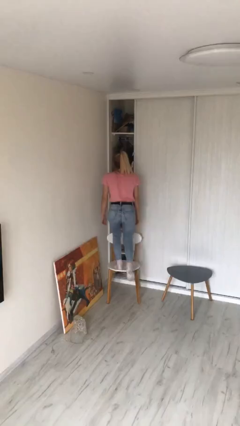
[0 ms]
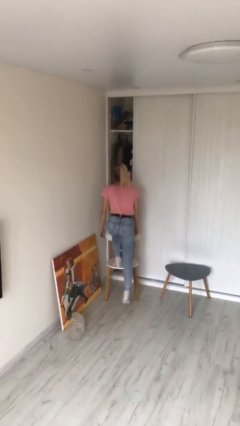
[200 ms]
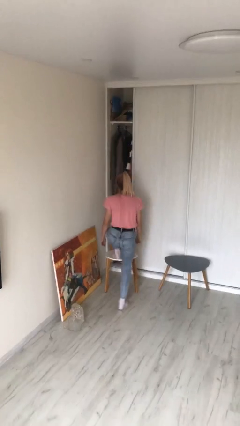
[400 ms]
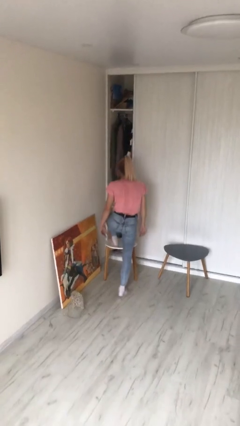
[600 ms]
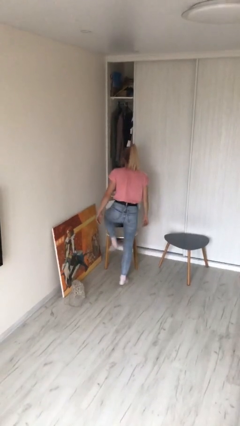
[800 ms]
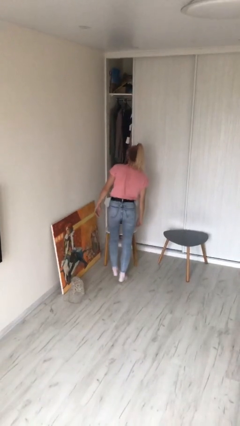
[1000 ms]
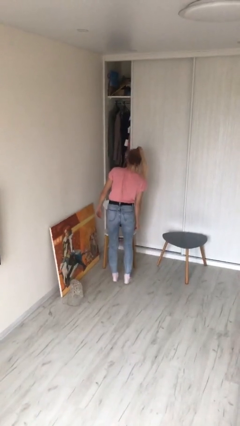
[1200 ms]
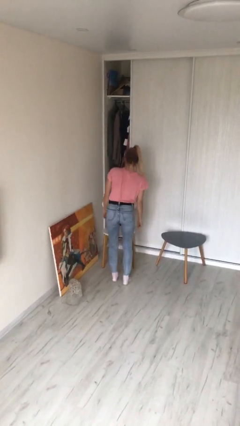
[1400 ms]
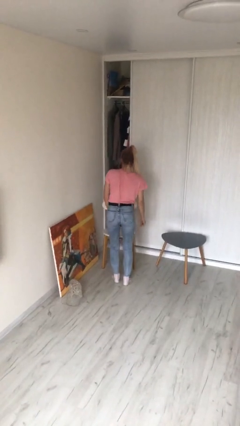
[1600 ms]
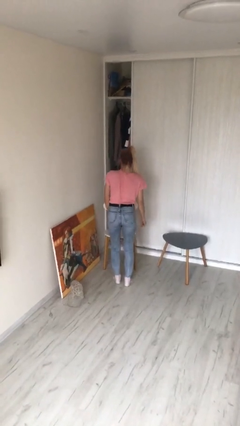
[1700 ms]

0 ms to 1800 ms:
person climbs off chair

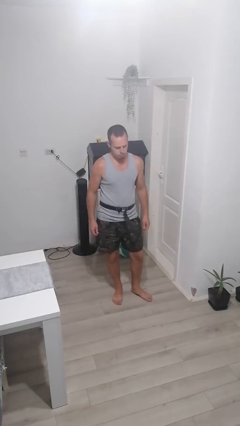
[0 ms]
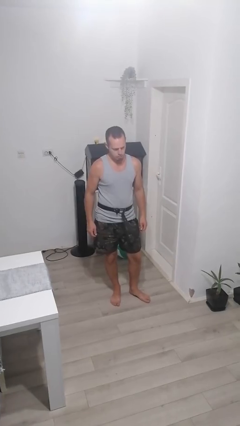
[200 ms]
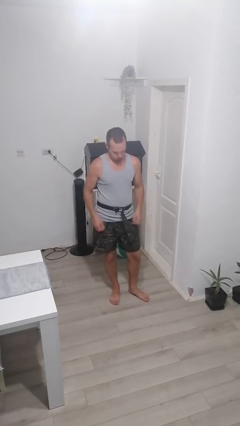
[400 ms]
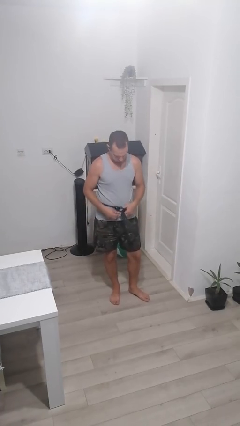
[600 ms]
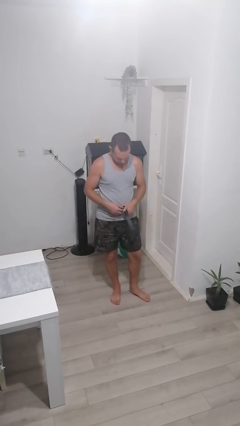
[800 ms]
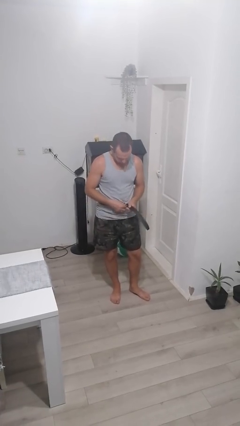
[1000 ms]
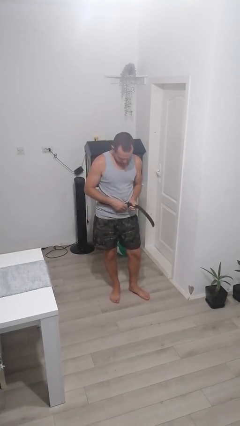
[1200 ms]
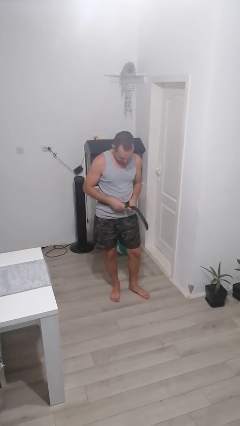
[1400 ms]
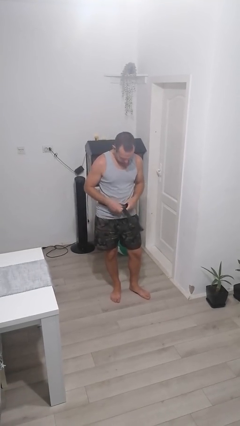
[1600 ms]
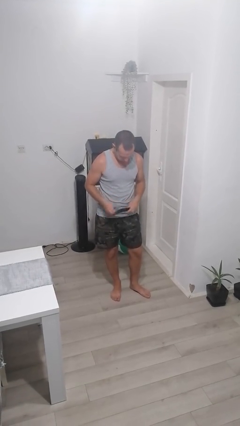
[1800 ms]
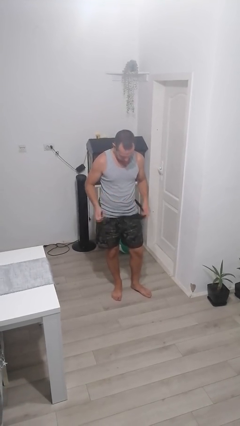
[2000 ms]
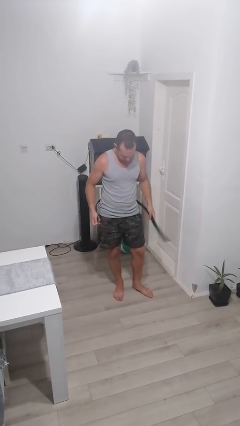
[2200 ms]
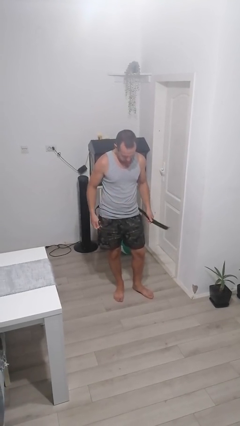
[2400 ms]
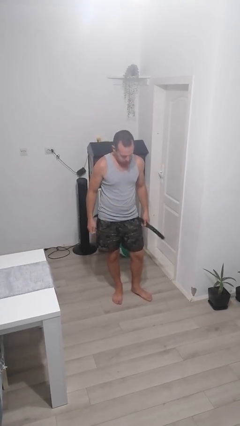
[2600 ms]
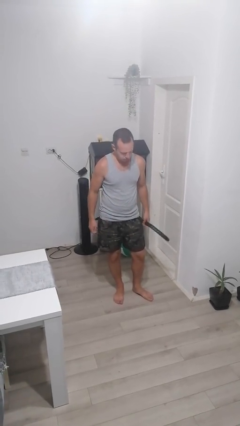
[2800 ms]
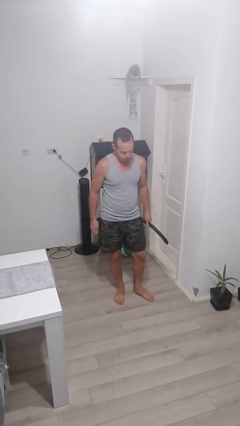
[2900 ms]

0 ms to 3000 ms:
person takes off belt

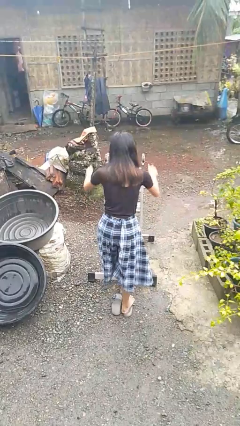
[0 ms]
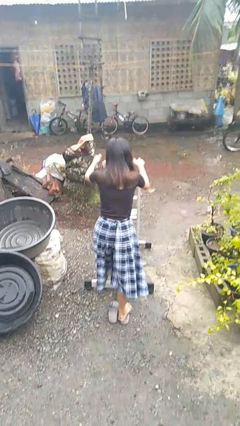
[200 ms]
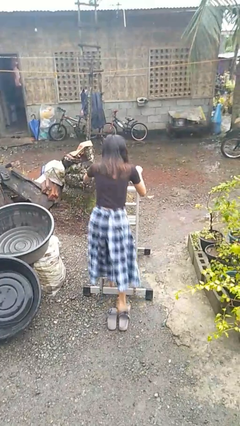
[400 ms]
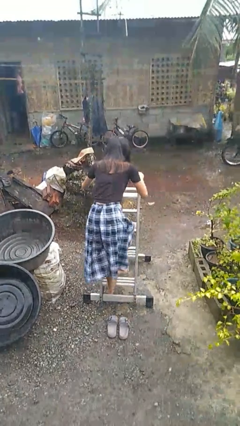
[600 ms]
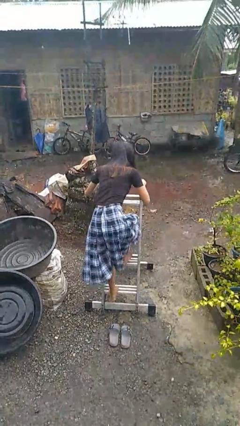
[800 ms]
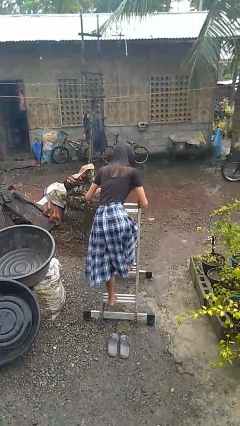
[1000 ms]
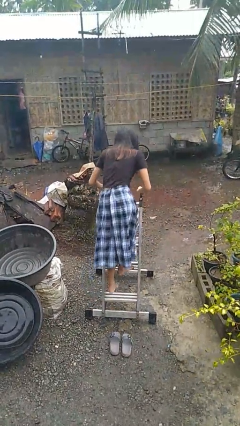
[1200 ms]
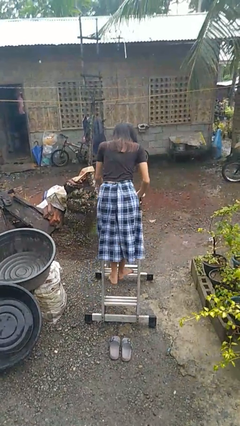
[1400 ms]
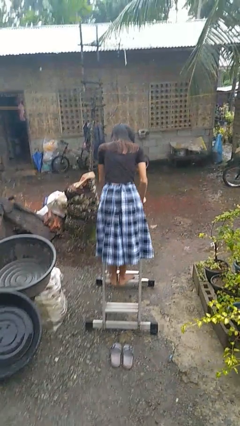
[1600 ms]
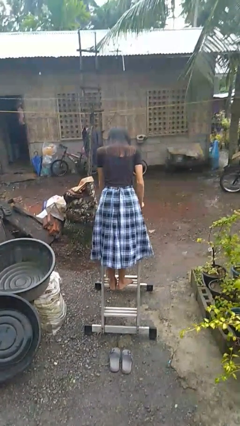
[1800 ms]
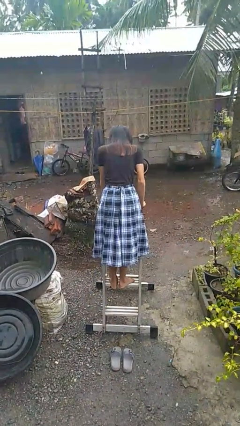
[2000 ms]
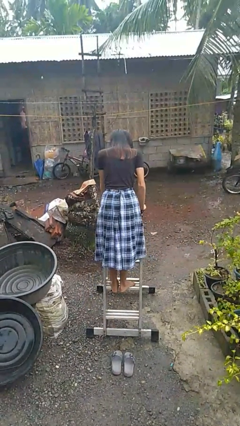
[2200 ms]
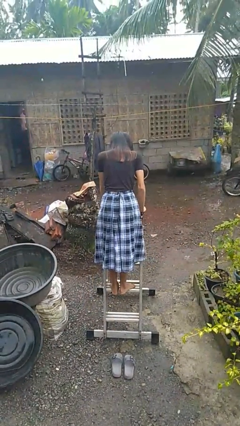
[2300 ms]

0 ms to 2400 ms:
person climbs up ladder

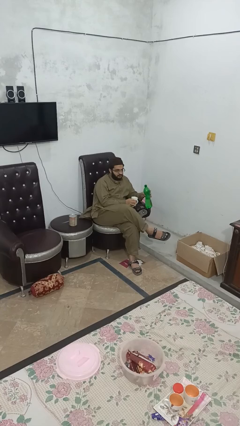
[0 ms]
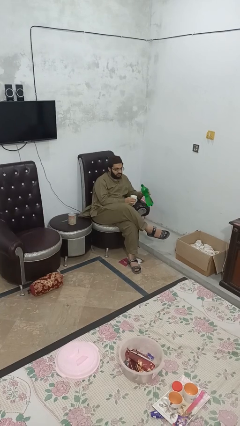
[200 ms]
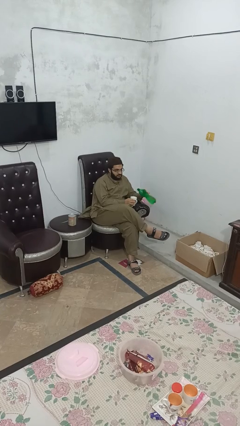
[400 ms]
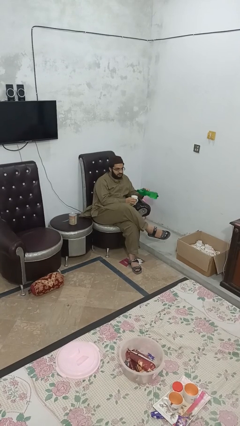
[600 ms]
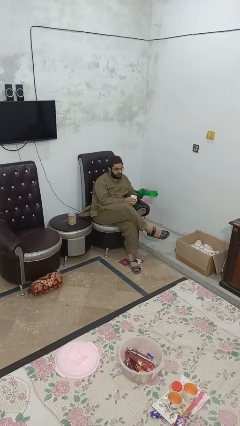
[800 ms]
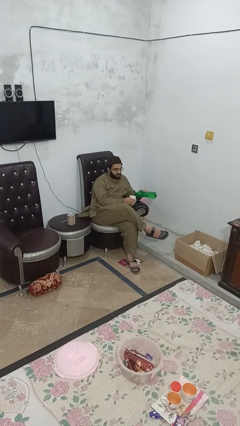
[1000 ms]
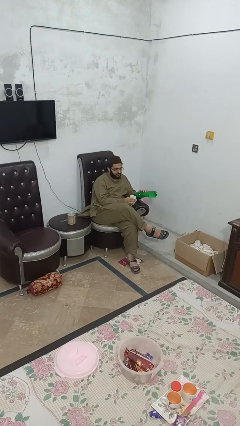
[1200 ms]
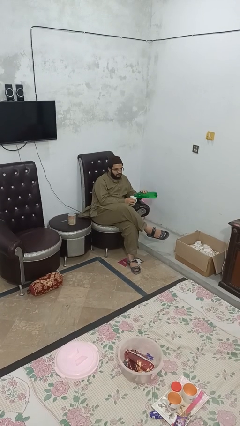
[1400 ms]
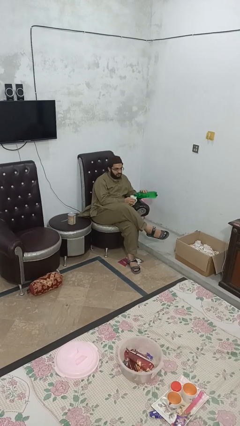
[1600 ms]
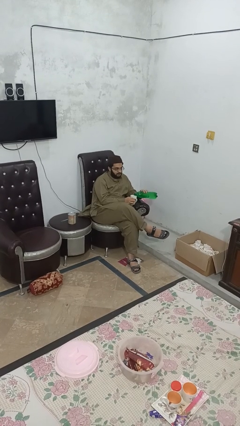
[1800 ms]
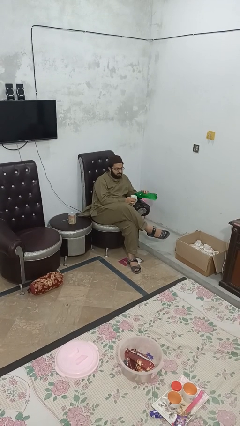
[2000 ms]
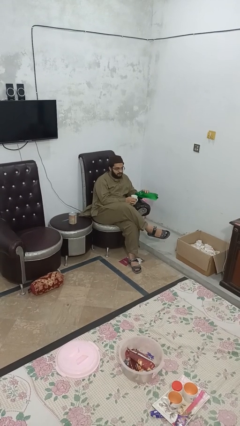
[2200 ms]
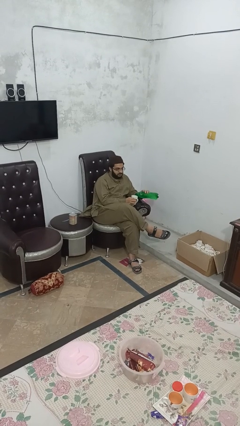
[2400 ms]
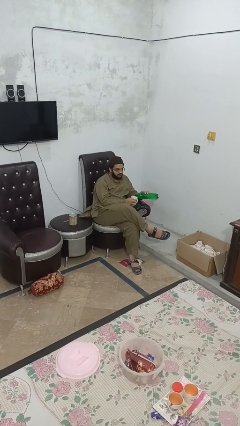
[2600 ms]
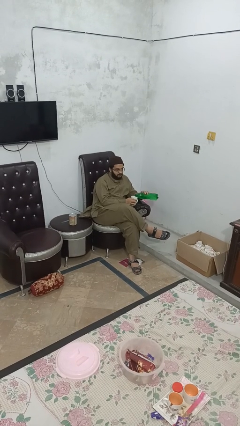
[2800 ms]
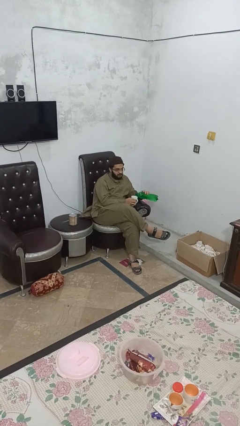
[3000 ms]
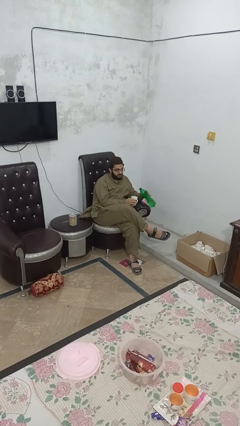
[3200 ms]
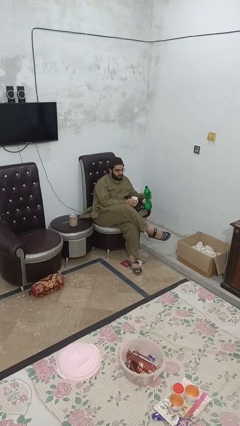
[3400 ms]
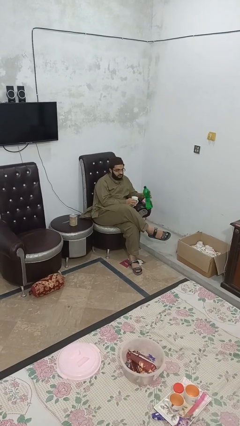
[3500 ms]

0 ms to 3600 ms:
person pours liquid into cup

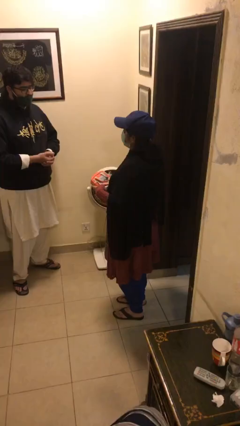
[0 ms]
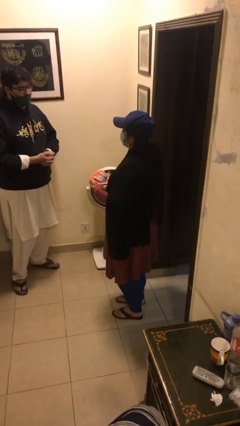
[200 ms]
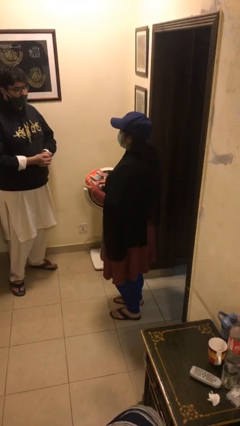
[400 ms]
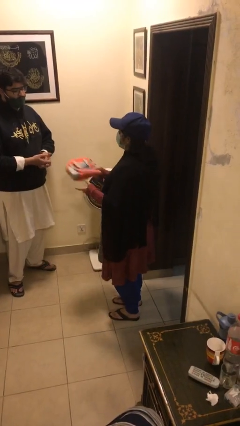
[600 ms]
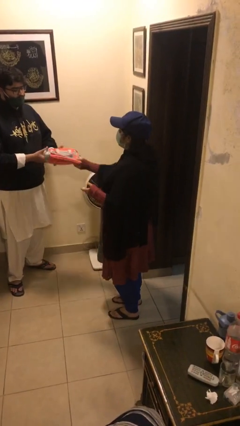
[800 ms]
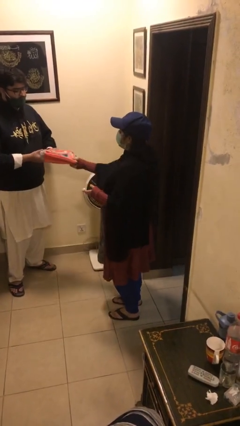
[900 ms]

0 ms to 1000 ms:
person transfers object to person

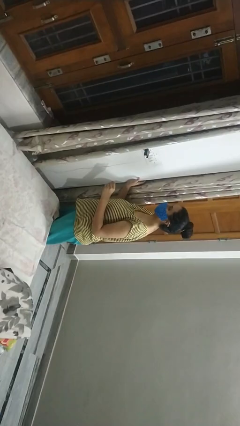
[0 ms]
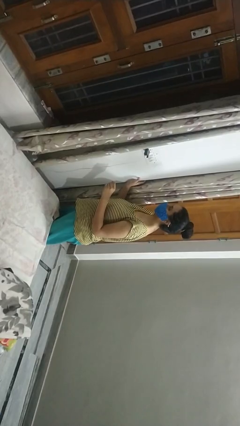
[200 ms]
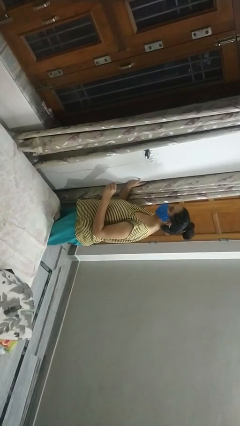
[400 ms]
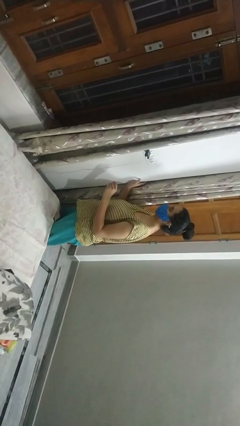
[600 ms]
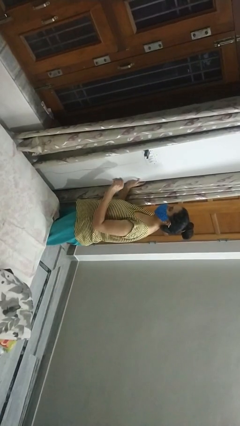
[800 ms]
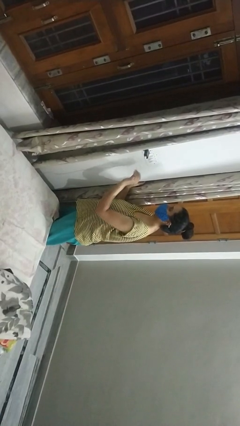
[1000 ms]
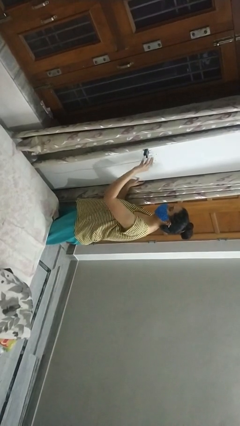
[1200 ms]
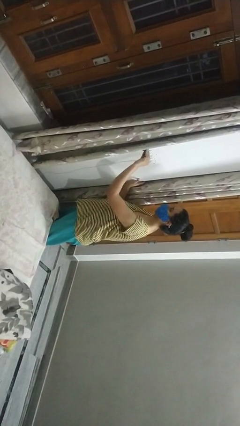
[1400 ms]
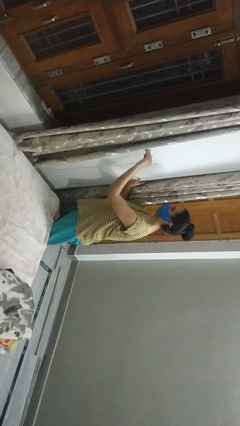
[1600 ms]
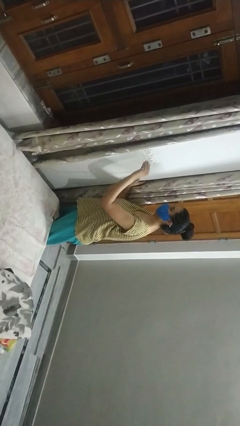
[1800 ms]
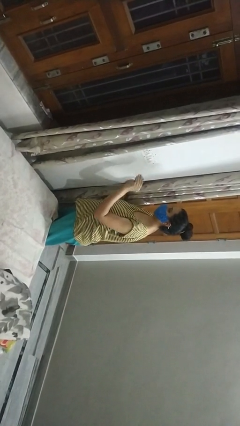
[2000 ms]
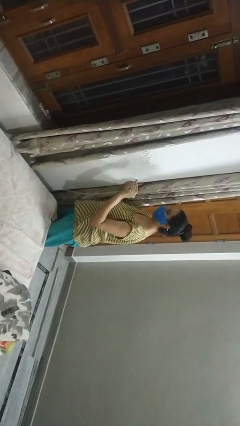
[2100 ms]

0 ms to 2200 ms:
person unplugs from electrical socket

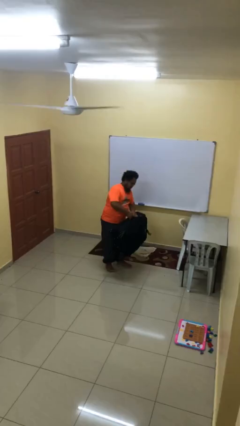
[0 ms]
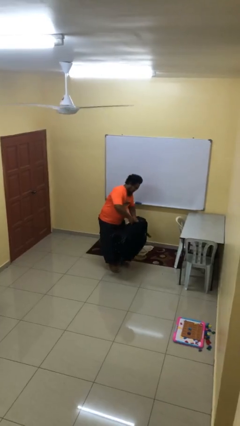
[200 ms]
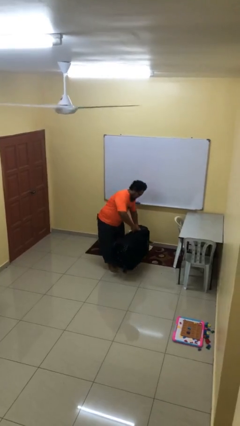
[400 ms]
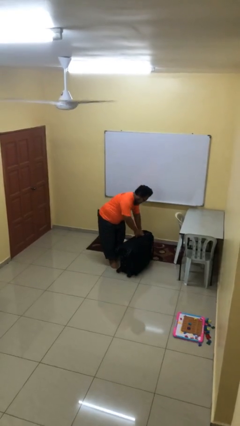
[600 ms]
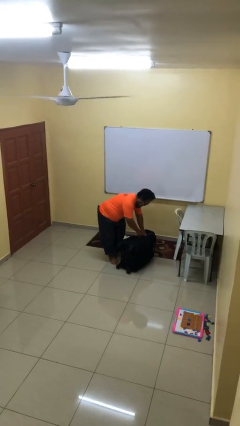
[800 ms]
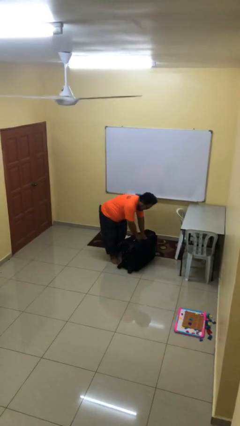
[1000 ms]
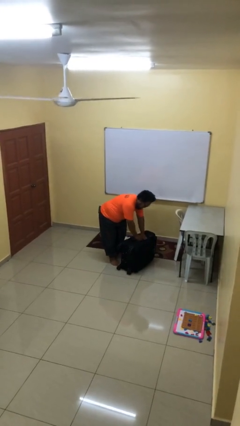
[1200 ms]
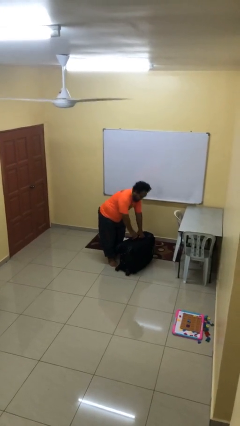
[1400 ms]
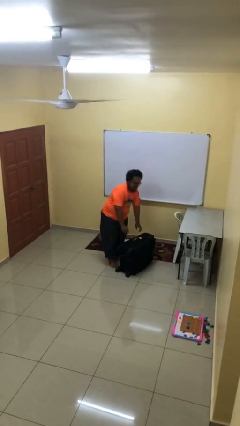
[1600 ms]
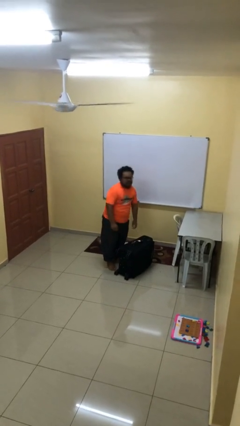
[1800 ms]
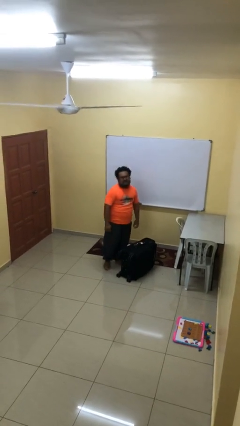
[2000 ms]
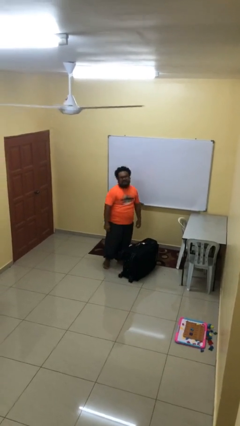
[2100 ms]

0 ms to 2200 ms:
person puts down object on floor

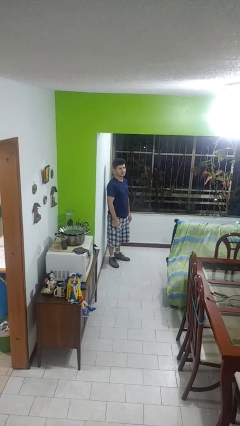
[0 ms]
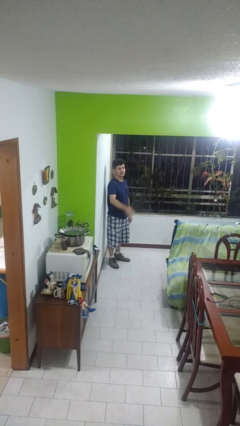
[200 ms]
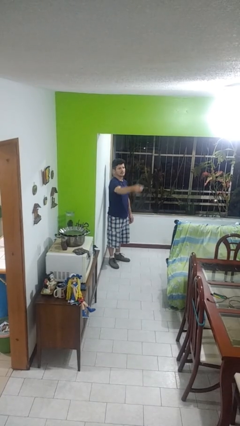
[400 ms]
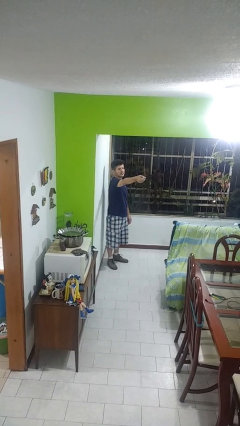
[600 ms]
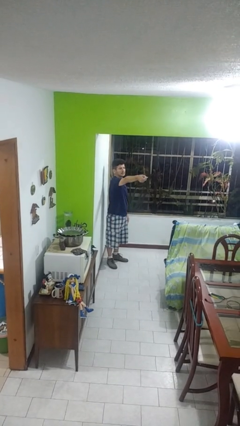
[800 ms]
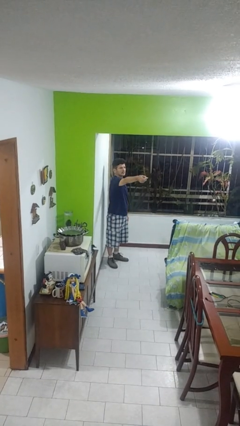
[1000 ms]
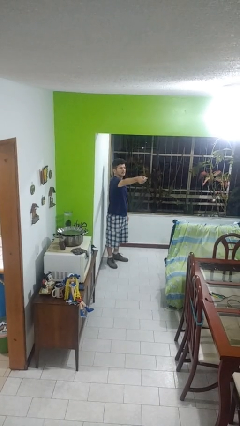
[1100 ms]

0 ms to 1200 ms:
person uses television remote
